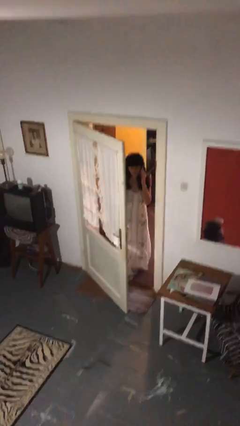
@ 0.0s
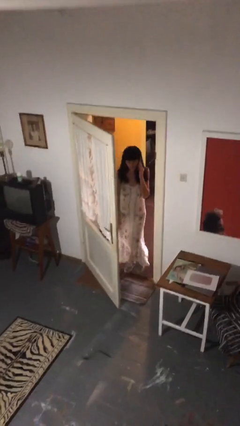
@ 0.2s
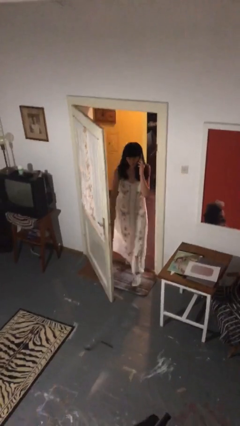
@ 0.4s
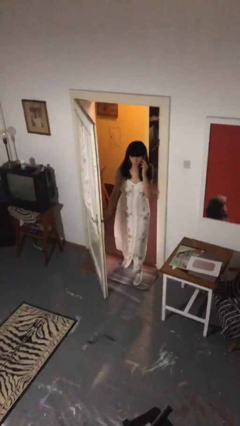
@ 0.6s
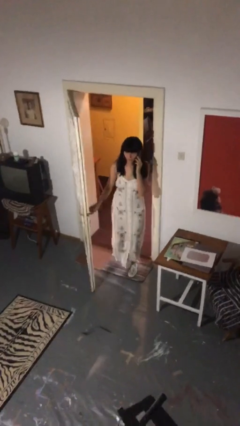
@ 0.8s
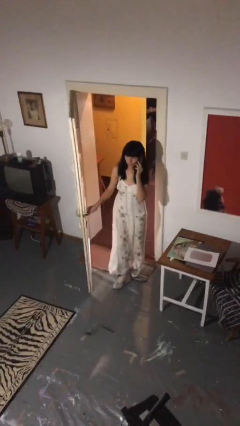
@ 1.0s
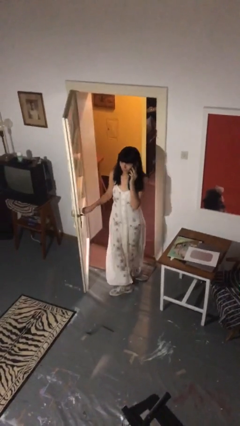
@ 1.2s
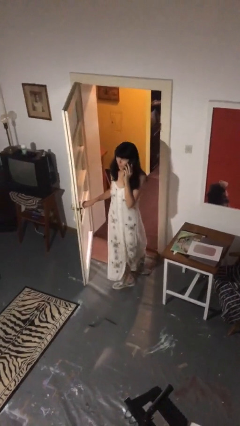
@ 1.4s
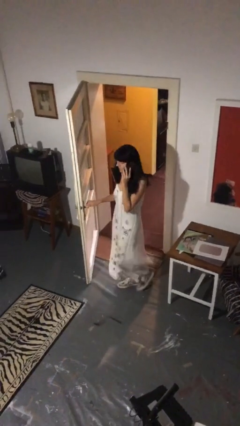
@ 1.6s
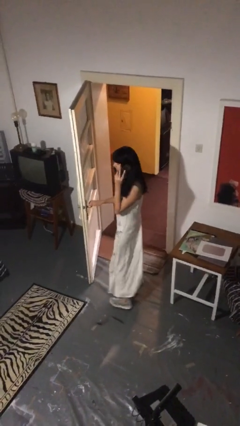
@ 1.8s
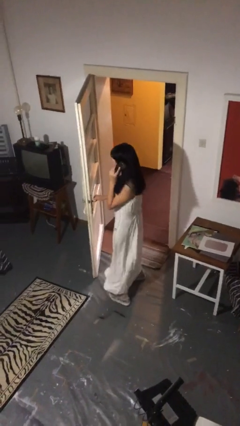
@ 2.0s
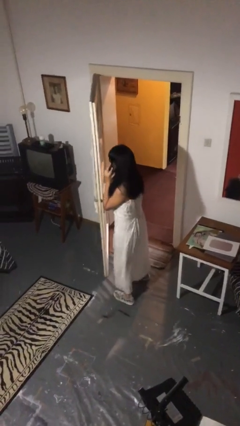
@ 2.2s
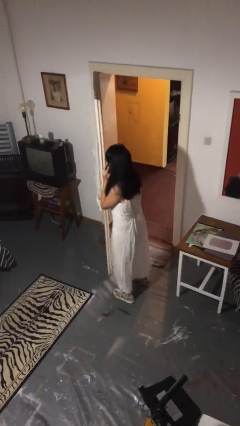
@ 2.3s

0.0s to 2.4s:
person enters scene through structure

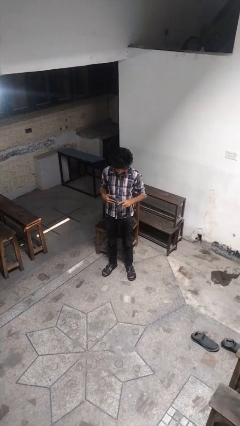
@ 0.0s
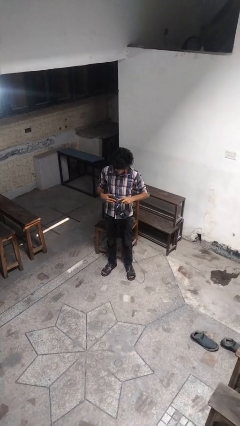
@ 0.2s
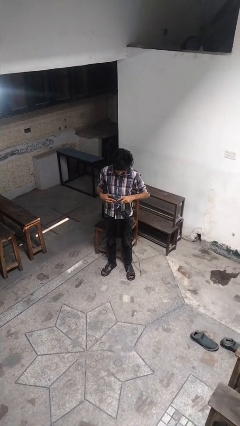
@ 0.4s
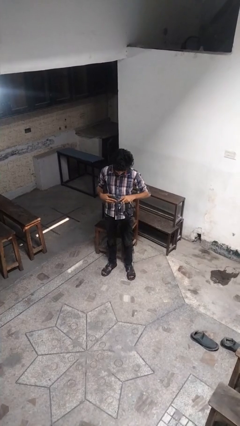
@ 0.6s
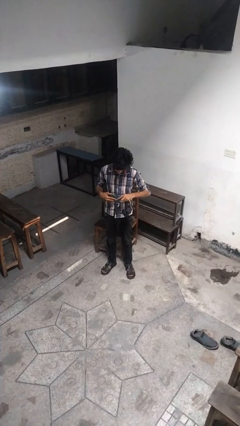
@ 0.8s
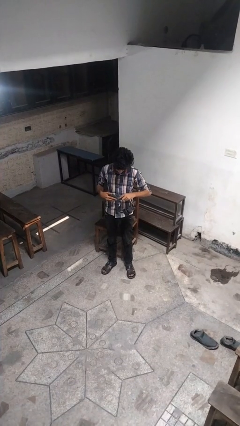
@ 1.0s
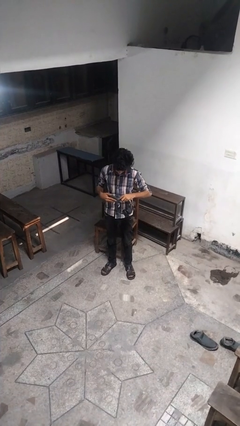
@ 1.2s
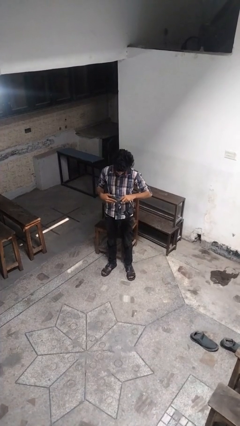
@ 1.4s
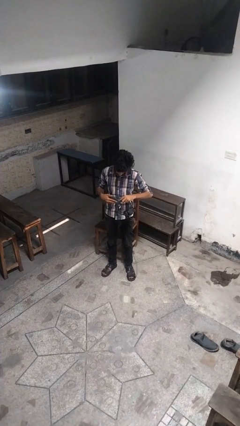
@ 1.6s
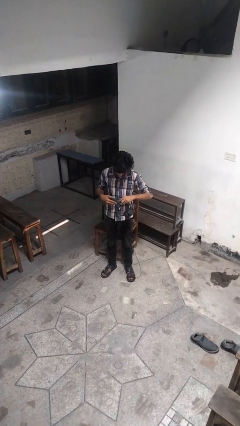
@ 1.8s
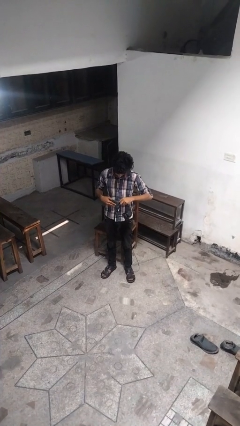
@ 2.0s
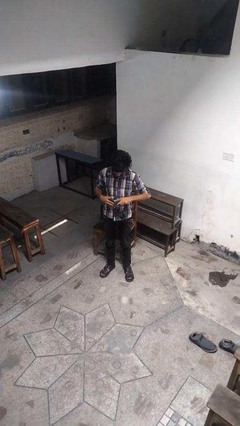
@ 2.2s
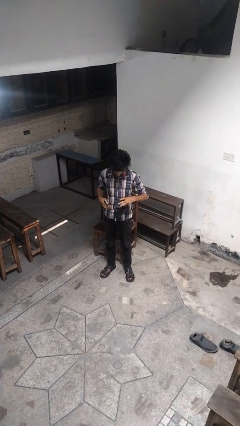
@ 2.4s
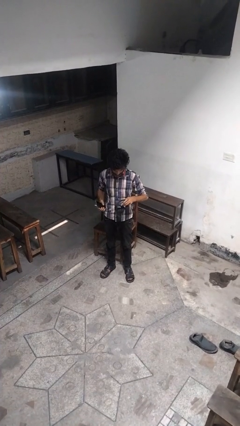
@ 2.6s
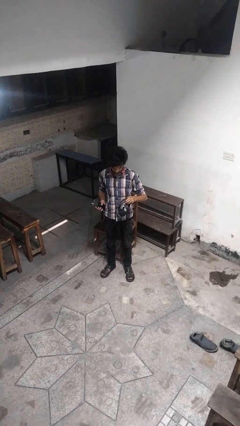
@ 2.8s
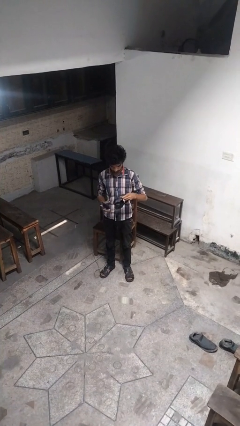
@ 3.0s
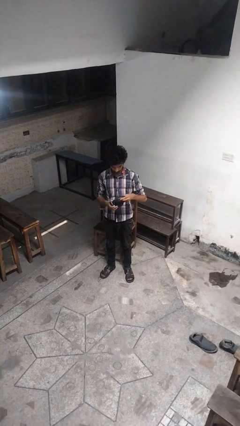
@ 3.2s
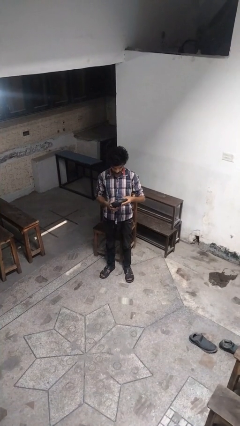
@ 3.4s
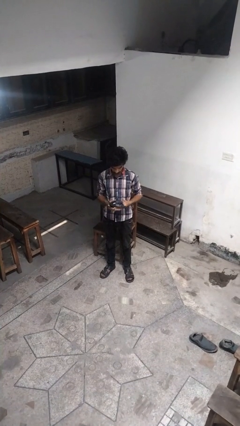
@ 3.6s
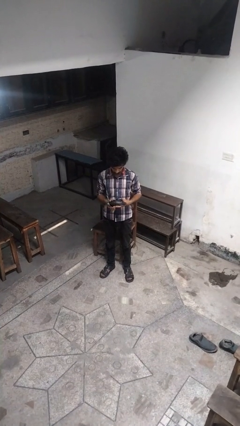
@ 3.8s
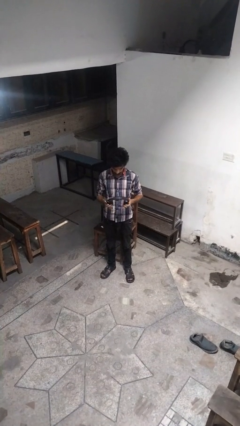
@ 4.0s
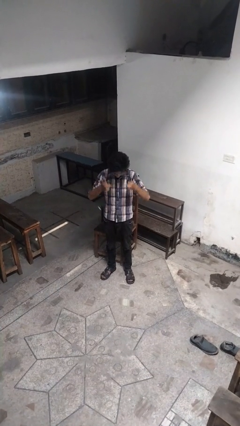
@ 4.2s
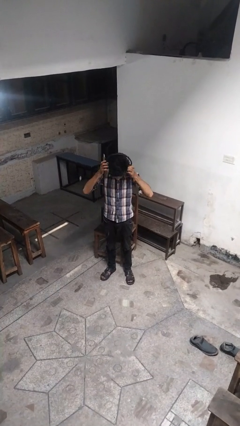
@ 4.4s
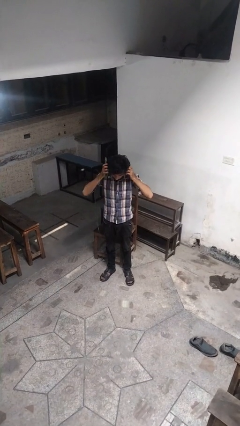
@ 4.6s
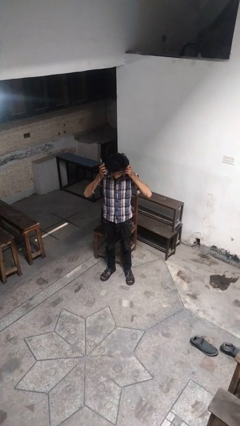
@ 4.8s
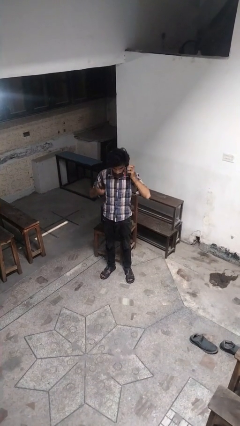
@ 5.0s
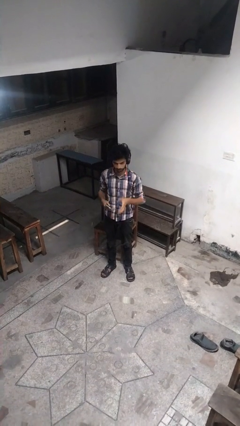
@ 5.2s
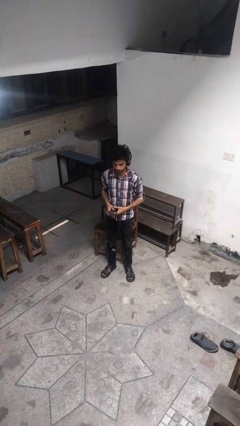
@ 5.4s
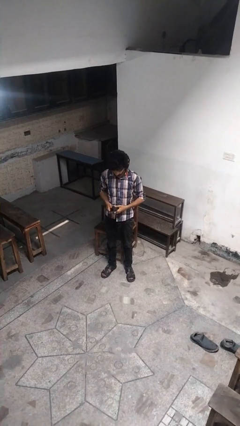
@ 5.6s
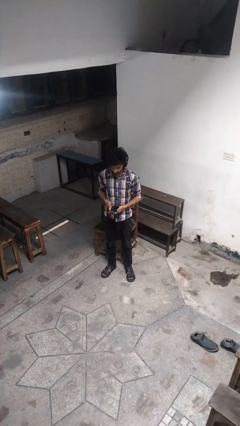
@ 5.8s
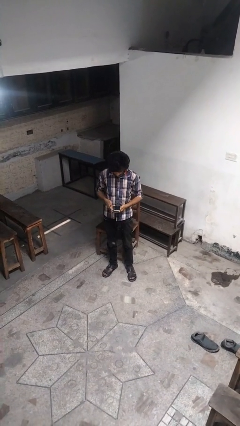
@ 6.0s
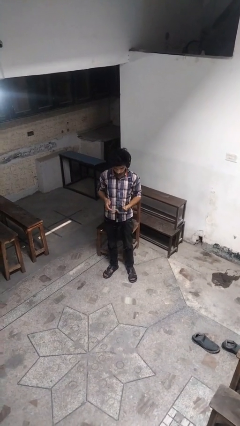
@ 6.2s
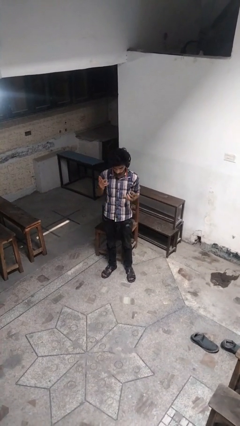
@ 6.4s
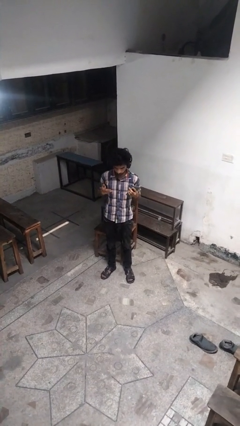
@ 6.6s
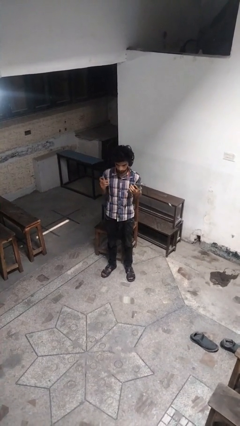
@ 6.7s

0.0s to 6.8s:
person puts on headphones

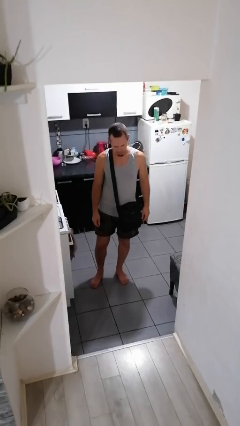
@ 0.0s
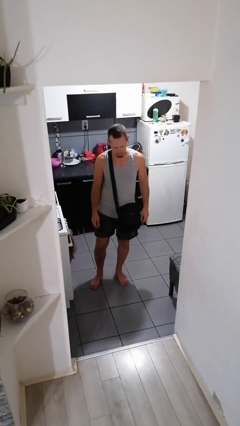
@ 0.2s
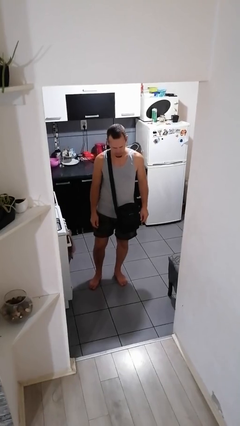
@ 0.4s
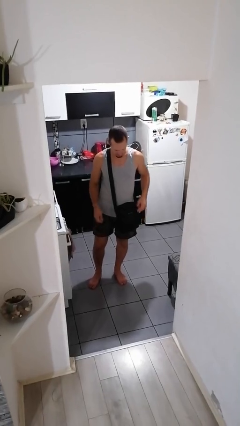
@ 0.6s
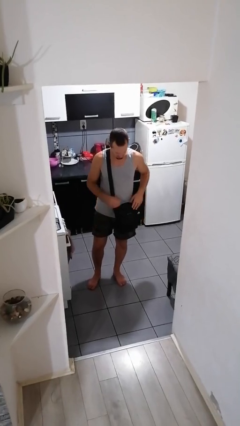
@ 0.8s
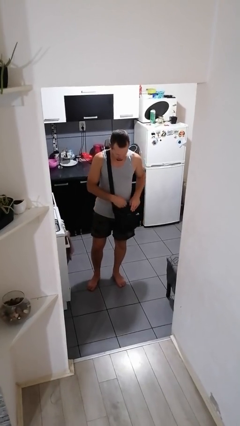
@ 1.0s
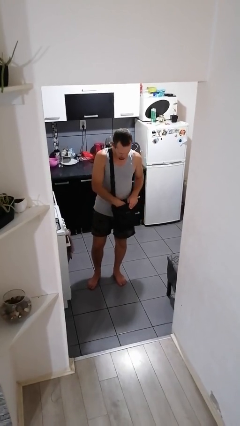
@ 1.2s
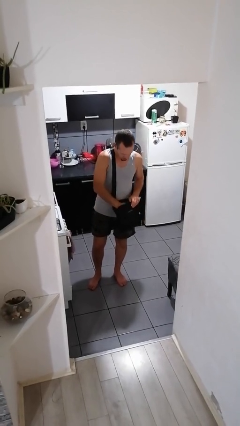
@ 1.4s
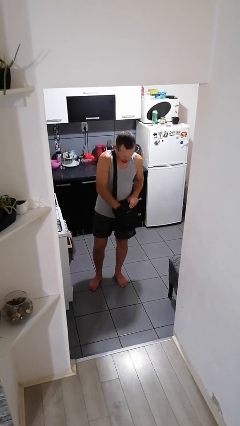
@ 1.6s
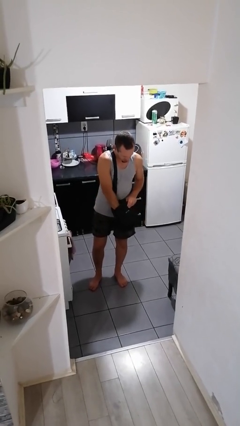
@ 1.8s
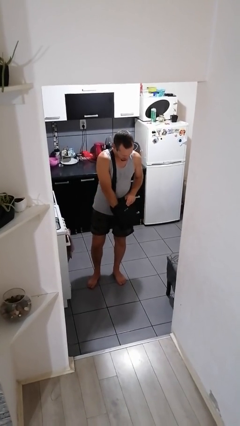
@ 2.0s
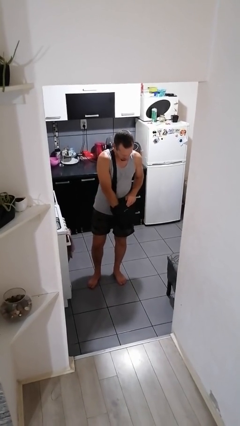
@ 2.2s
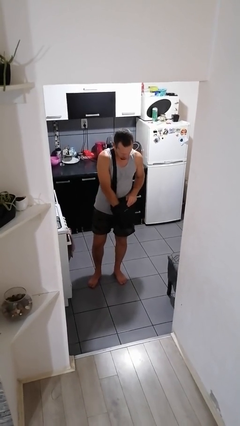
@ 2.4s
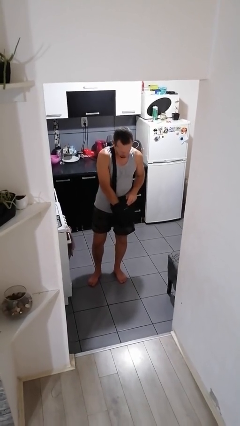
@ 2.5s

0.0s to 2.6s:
person searches in purse

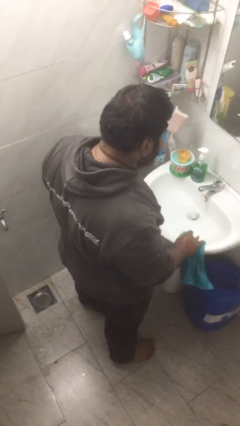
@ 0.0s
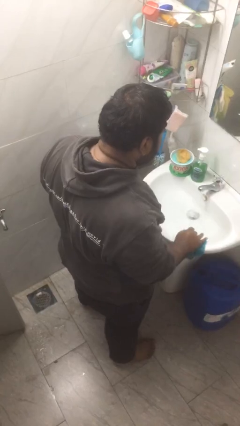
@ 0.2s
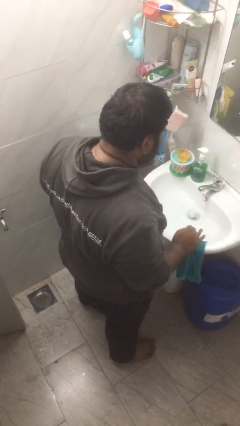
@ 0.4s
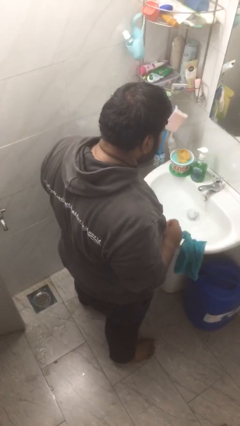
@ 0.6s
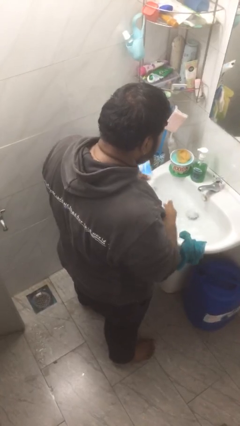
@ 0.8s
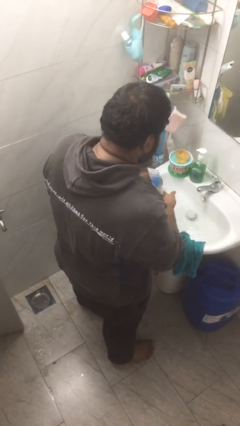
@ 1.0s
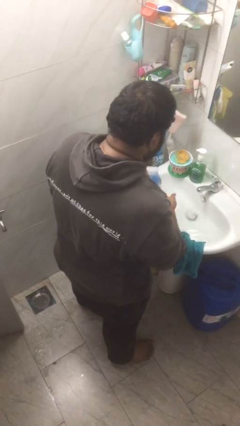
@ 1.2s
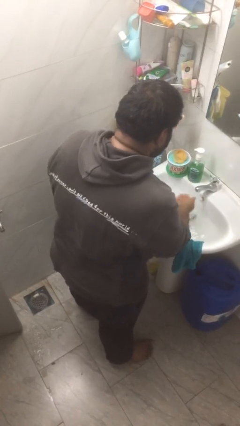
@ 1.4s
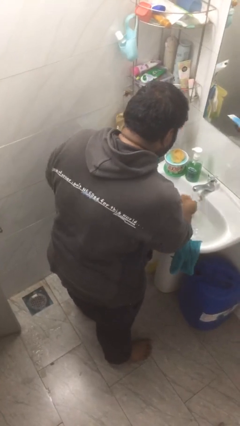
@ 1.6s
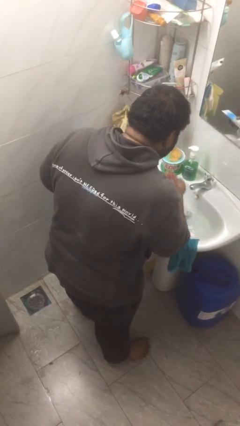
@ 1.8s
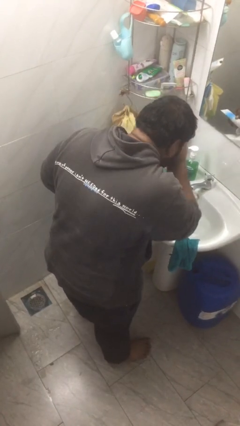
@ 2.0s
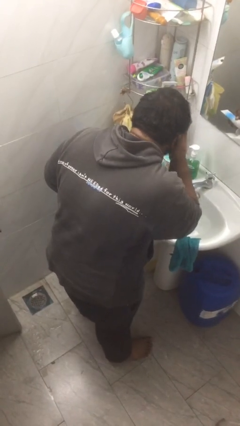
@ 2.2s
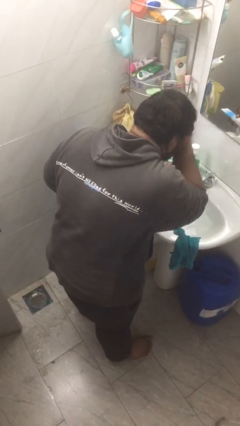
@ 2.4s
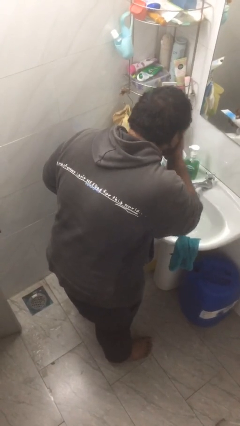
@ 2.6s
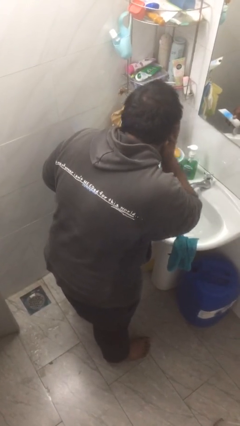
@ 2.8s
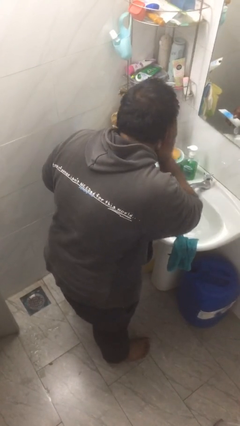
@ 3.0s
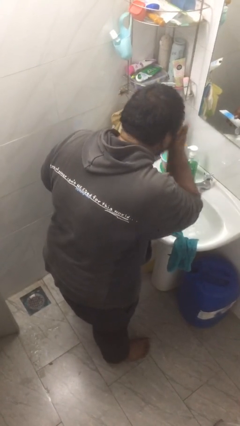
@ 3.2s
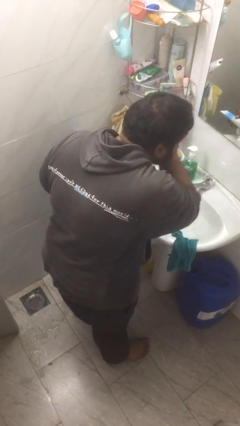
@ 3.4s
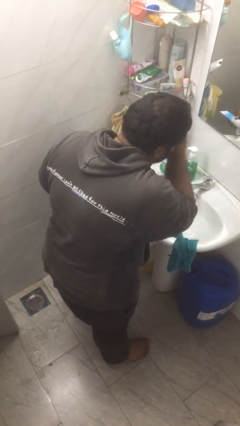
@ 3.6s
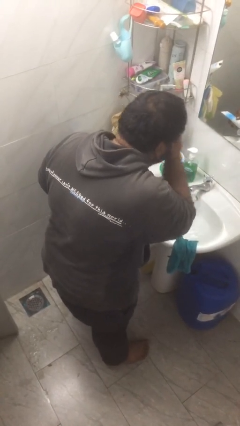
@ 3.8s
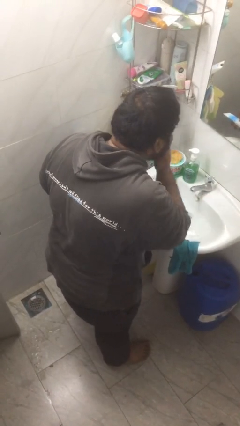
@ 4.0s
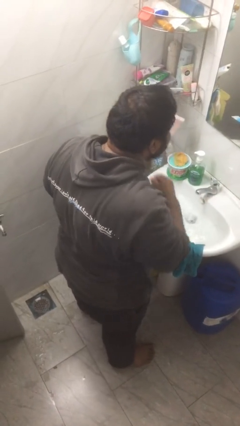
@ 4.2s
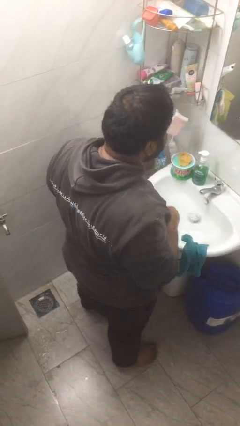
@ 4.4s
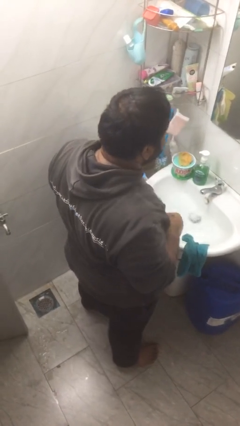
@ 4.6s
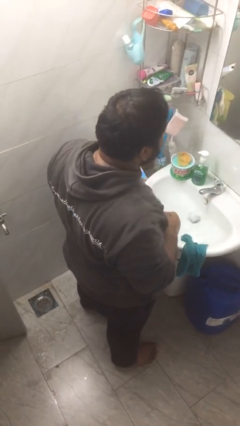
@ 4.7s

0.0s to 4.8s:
person washes face

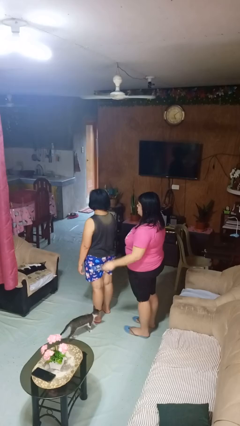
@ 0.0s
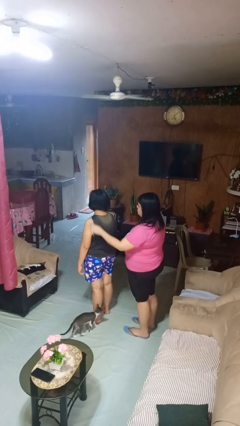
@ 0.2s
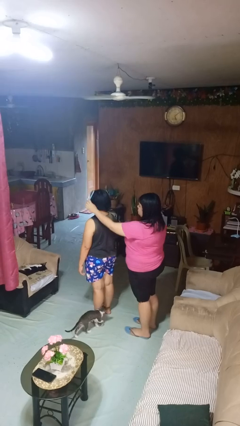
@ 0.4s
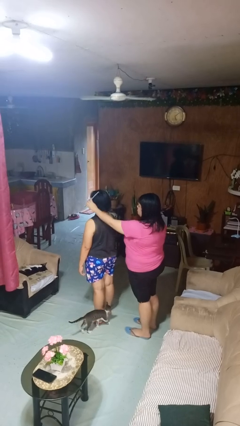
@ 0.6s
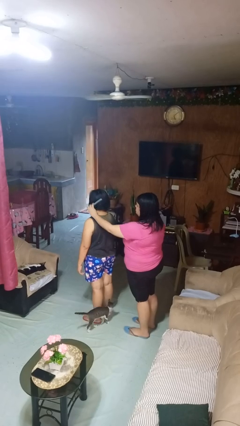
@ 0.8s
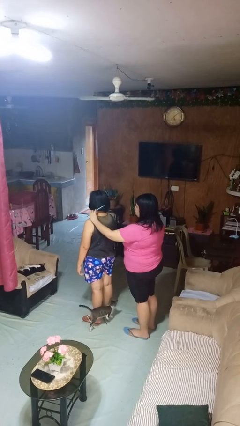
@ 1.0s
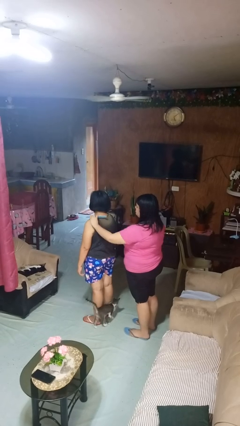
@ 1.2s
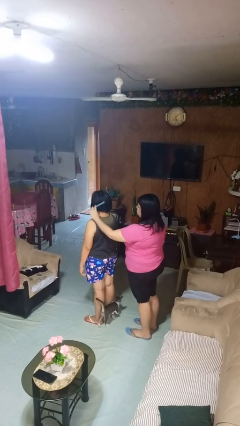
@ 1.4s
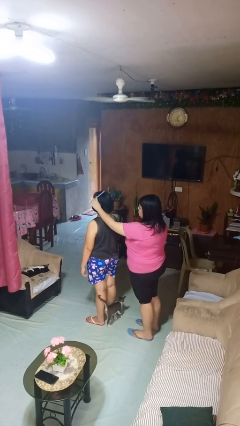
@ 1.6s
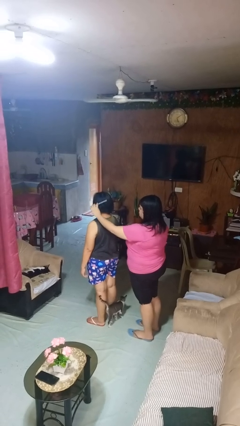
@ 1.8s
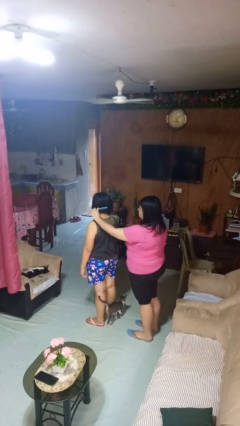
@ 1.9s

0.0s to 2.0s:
person brushes hair of person
